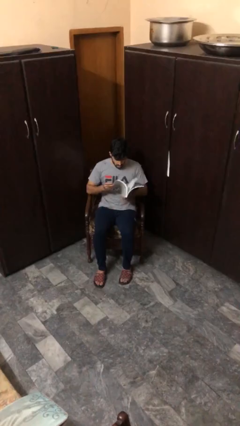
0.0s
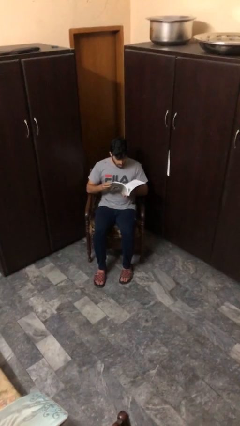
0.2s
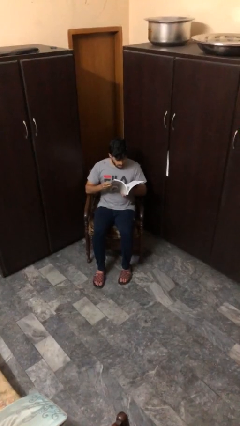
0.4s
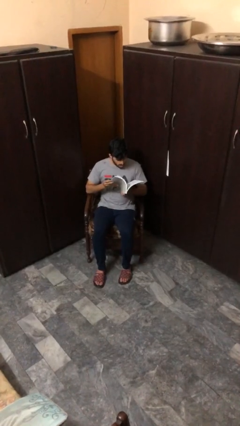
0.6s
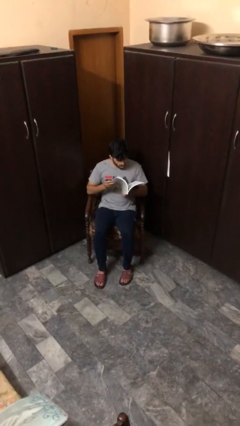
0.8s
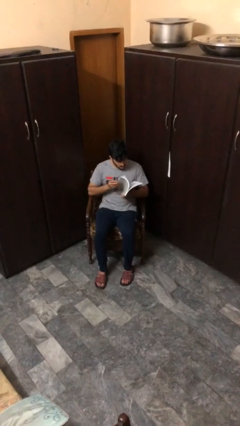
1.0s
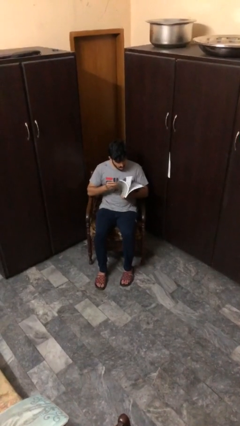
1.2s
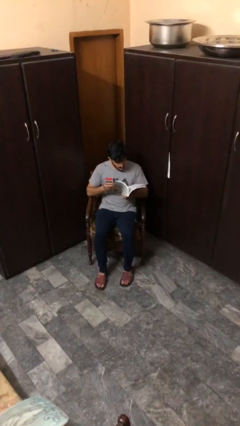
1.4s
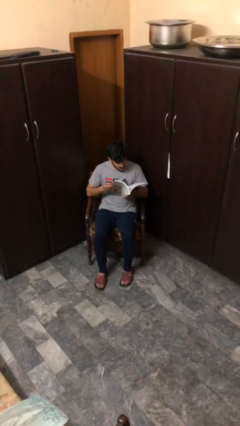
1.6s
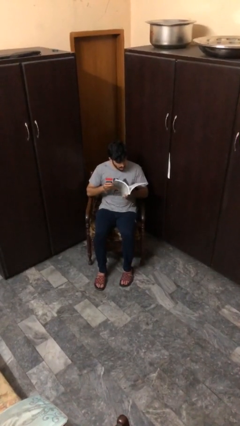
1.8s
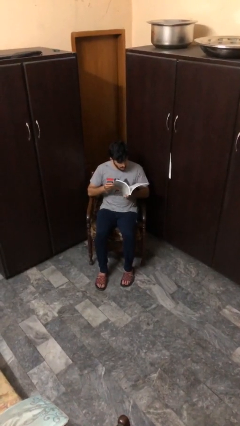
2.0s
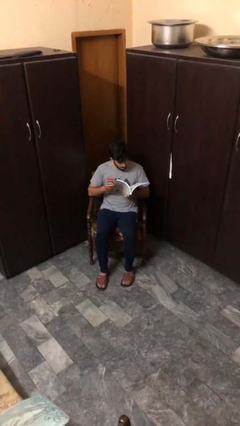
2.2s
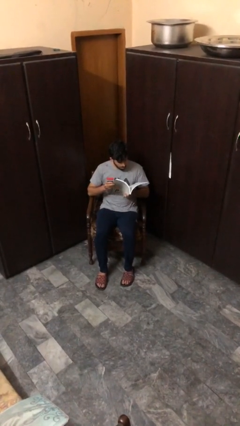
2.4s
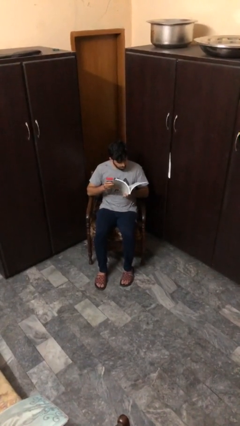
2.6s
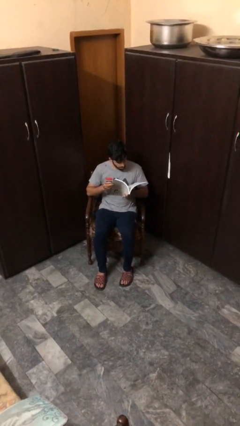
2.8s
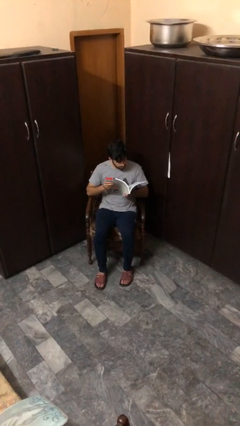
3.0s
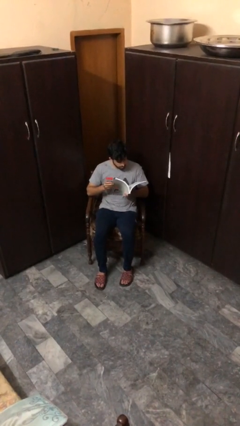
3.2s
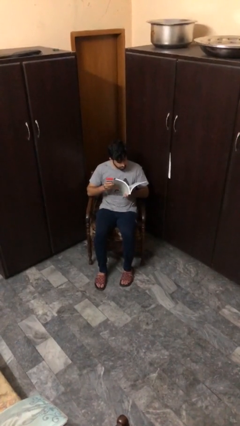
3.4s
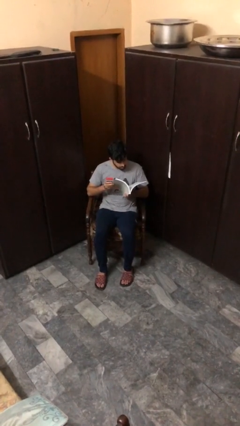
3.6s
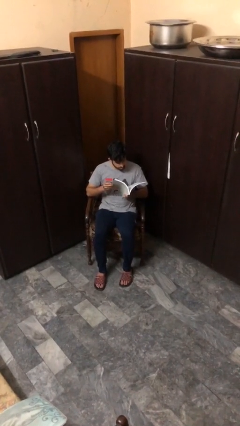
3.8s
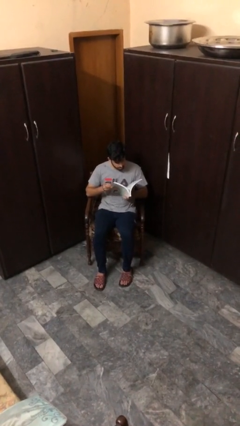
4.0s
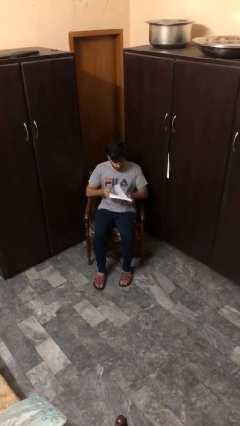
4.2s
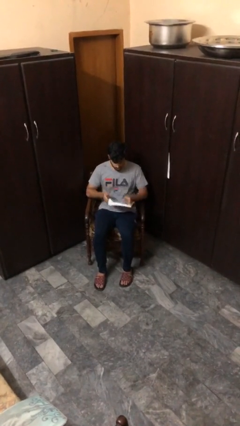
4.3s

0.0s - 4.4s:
person reads book

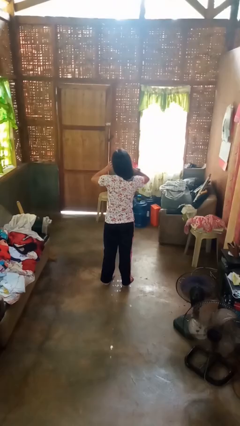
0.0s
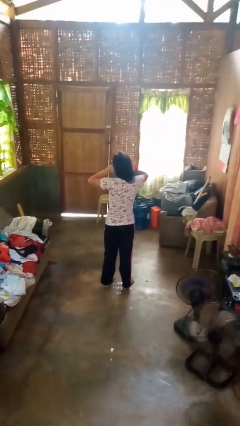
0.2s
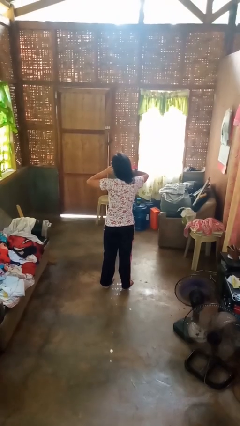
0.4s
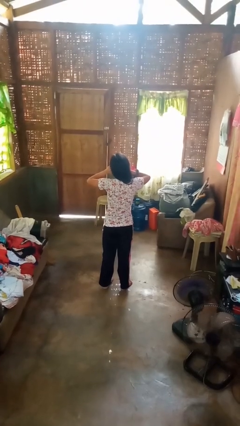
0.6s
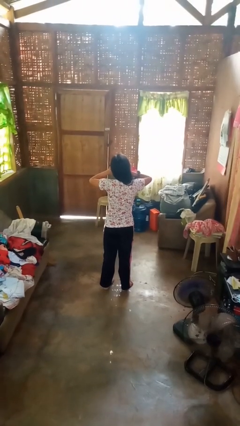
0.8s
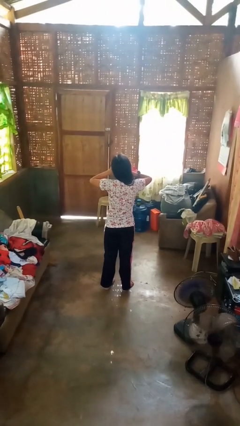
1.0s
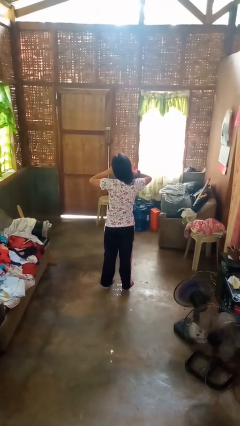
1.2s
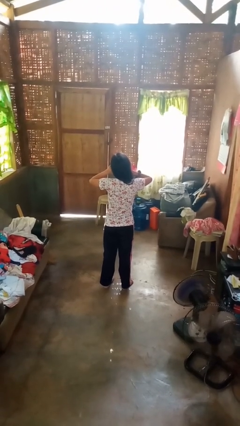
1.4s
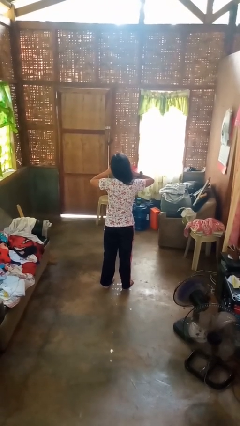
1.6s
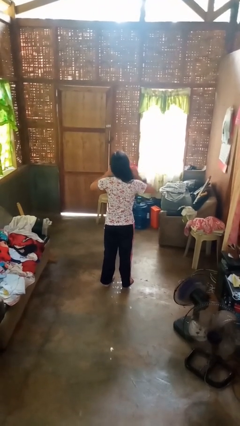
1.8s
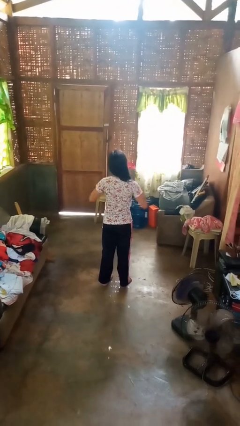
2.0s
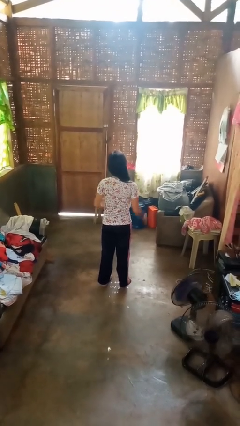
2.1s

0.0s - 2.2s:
person puts fingers in ear

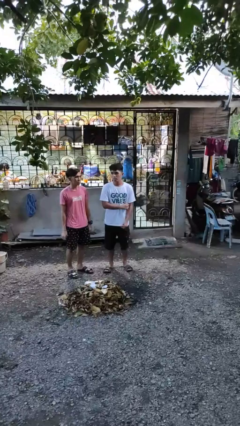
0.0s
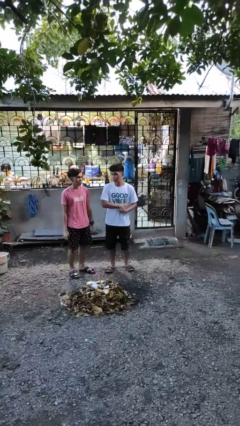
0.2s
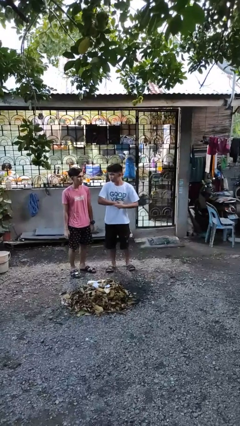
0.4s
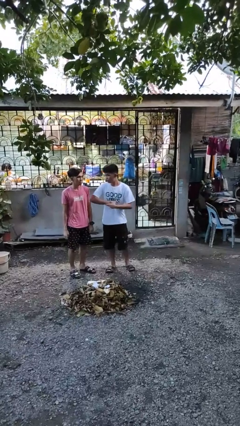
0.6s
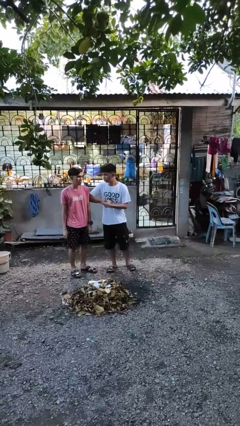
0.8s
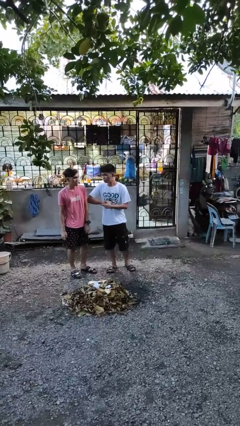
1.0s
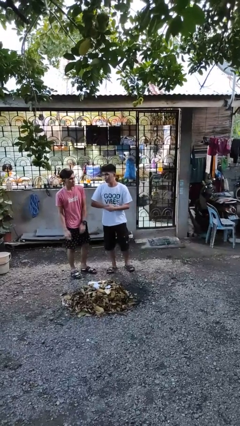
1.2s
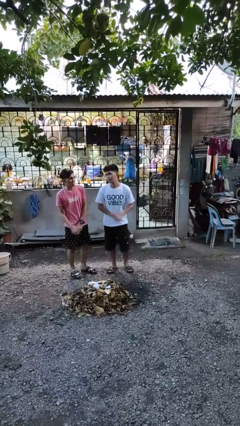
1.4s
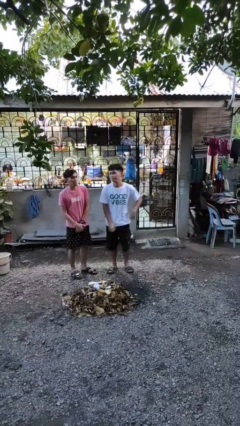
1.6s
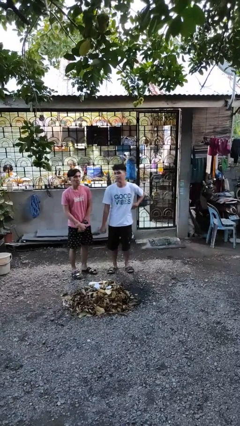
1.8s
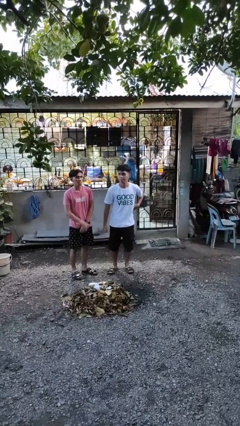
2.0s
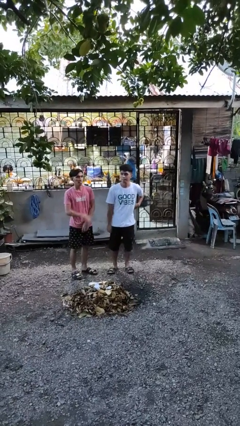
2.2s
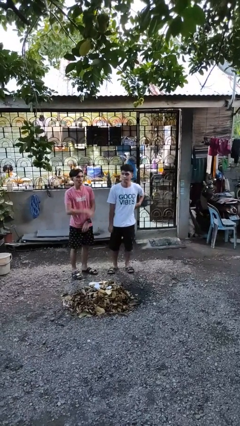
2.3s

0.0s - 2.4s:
person nudges person with elbow

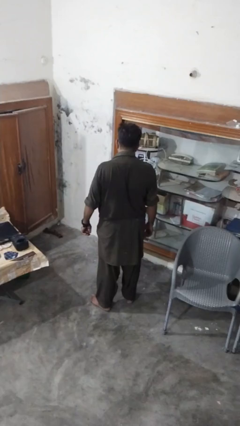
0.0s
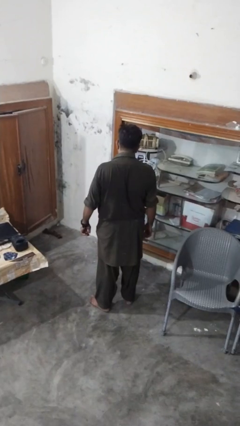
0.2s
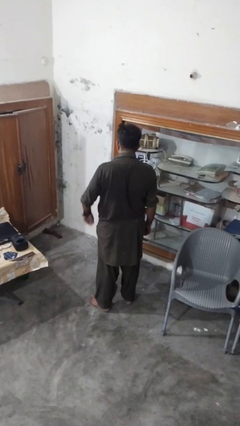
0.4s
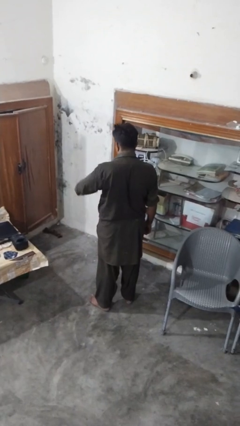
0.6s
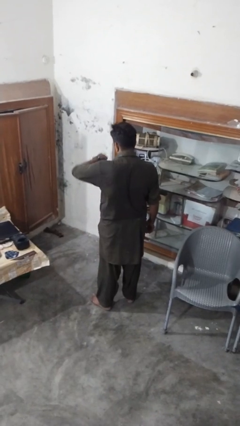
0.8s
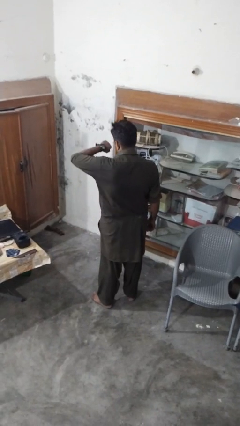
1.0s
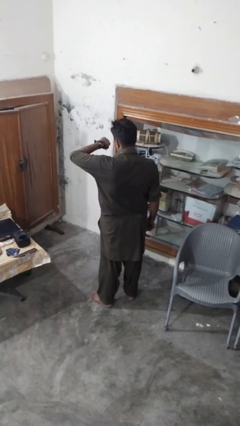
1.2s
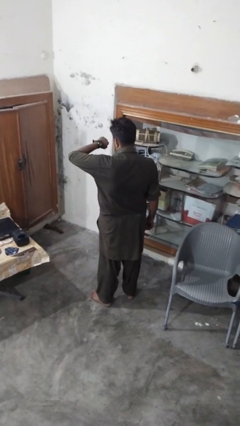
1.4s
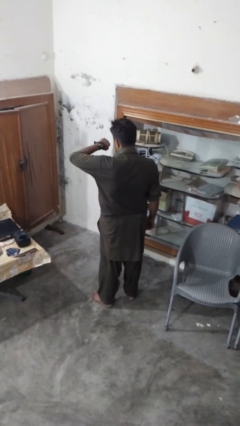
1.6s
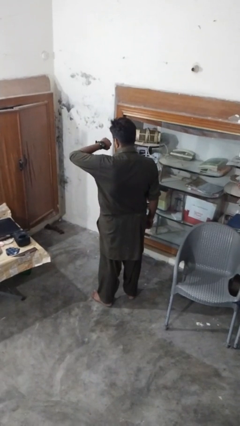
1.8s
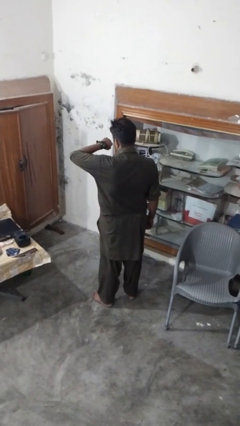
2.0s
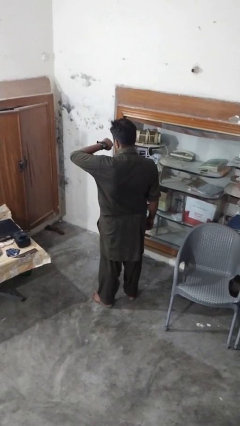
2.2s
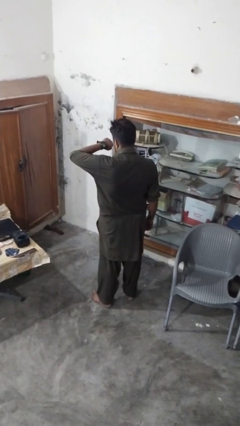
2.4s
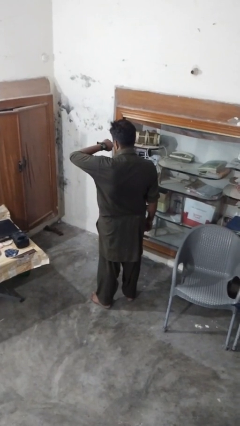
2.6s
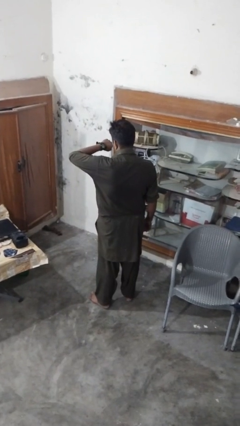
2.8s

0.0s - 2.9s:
person looks at wristwatch

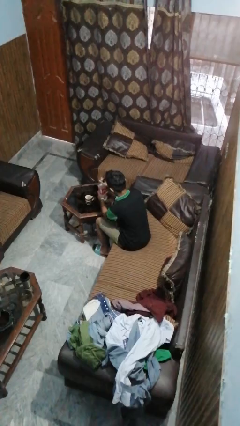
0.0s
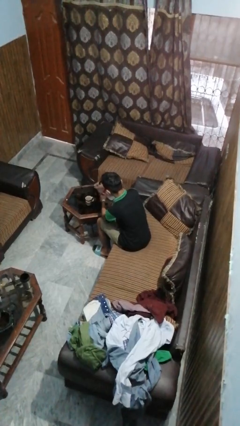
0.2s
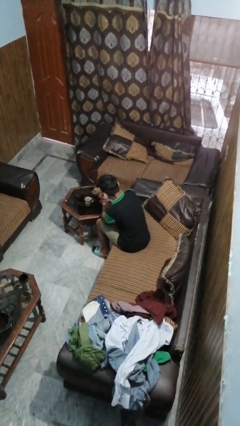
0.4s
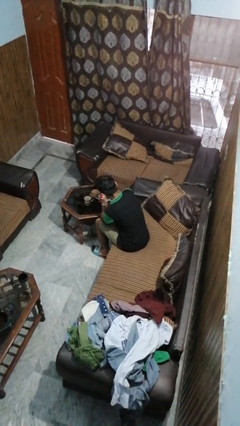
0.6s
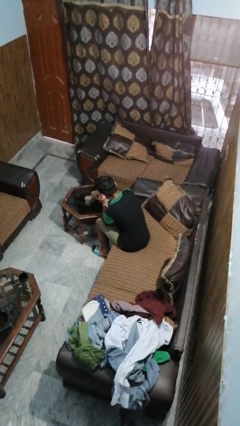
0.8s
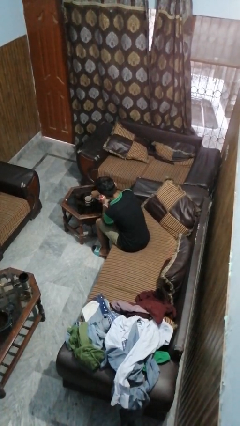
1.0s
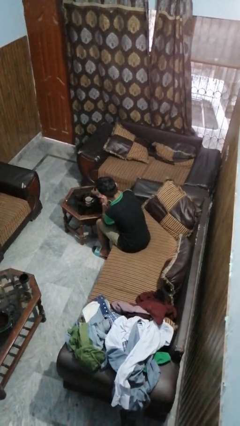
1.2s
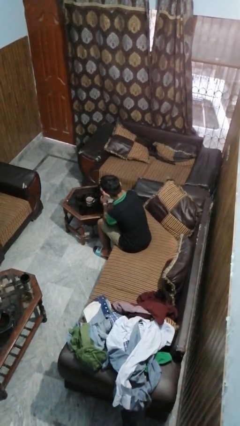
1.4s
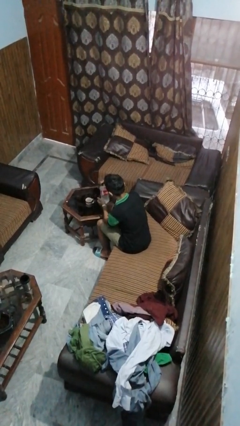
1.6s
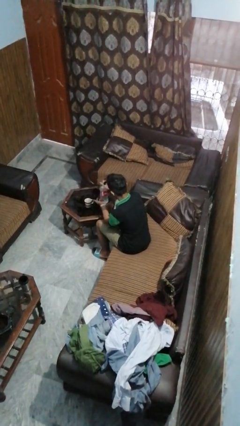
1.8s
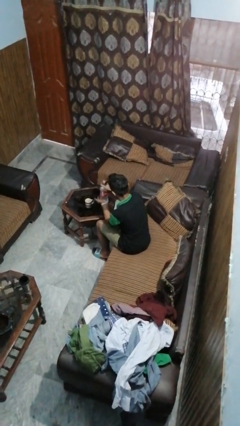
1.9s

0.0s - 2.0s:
person pours liquid into cup

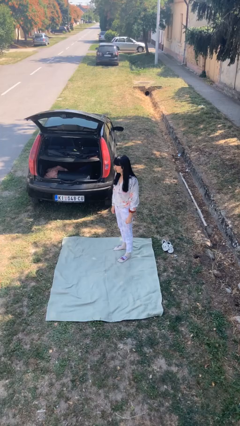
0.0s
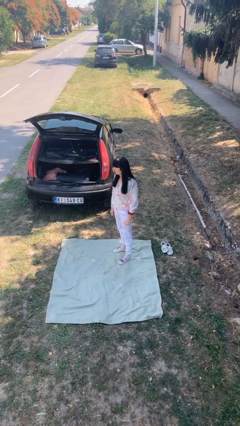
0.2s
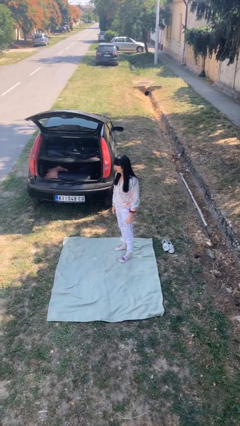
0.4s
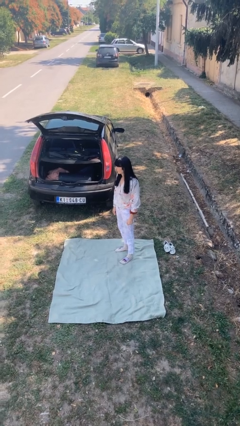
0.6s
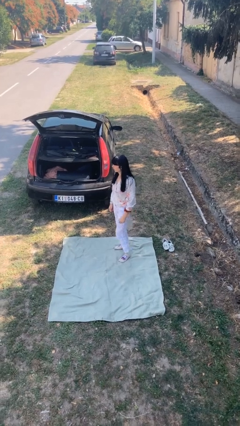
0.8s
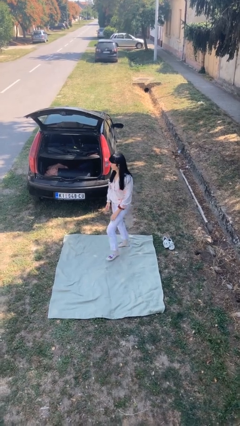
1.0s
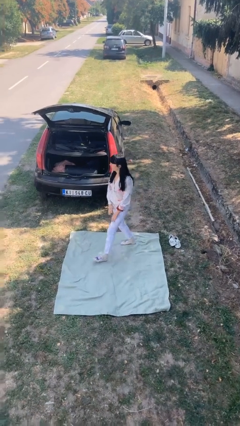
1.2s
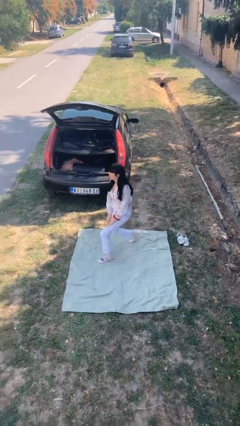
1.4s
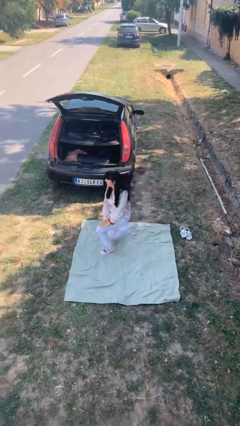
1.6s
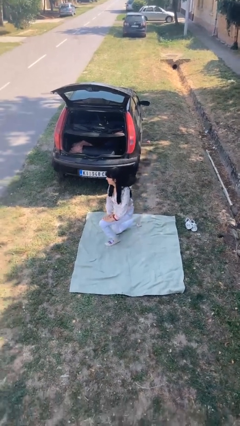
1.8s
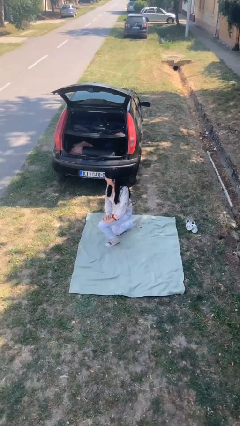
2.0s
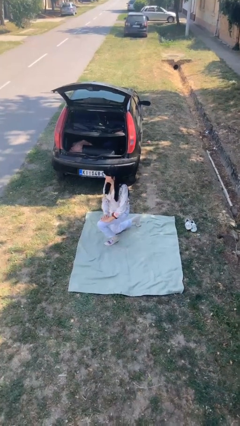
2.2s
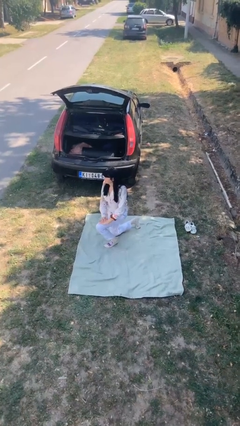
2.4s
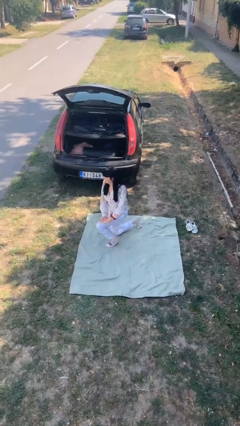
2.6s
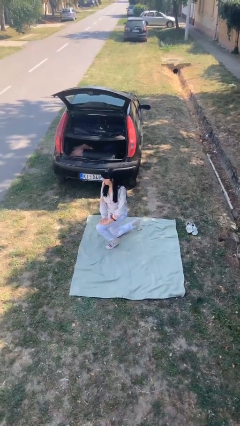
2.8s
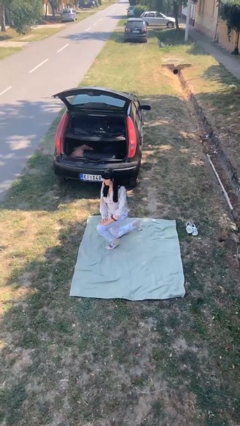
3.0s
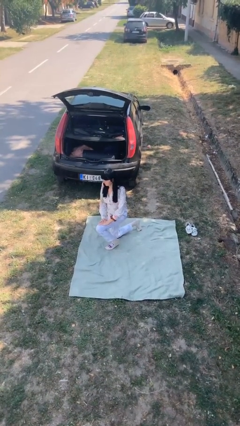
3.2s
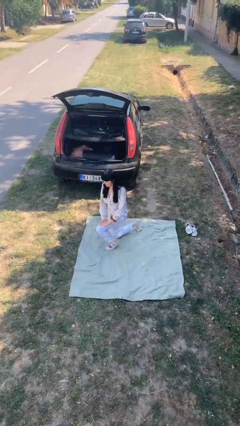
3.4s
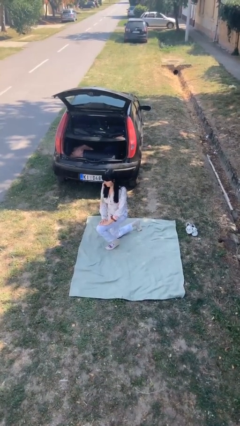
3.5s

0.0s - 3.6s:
person kneels

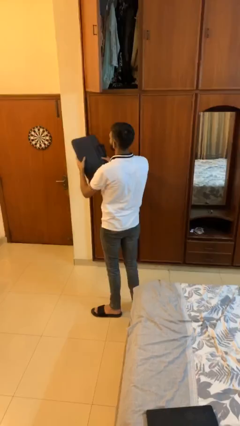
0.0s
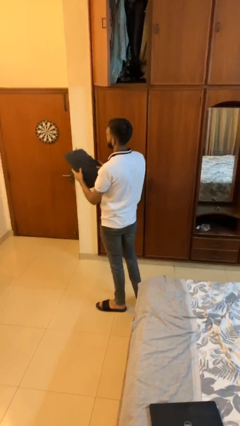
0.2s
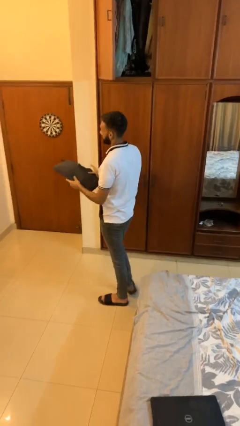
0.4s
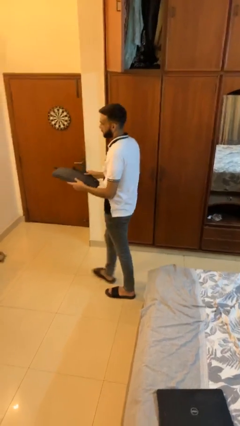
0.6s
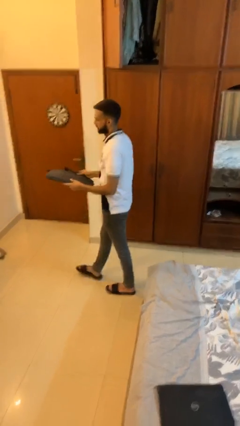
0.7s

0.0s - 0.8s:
person puts down object on table
